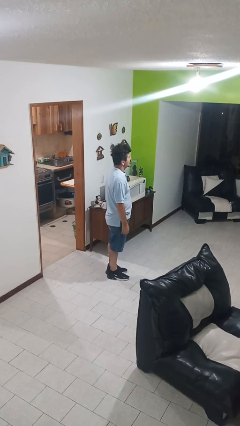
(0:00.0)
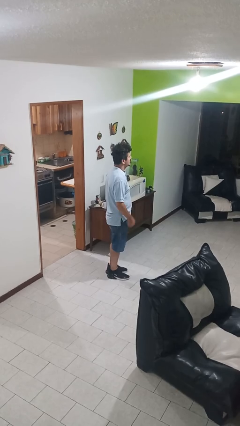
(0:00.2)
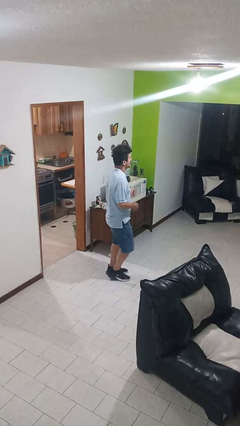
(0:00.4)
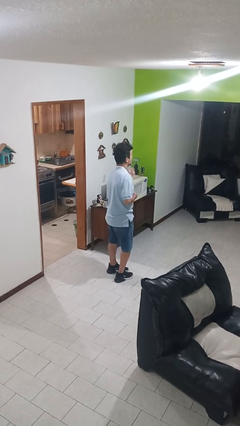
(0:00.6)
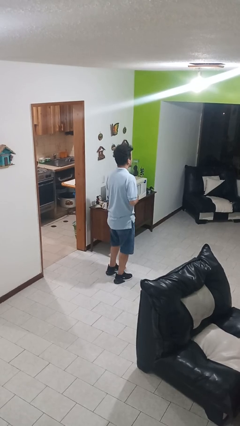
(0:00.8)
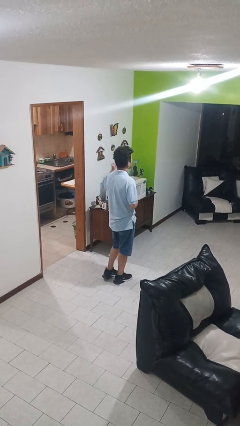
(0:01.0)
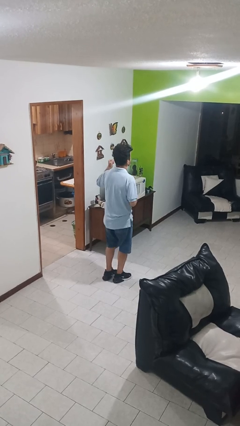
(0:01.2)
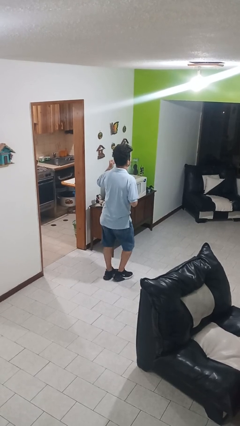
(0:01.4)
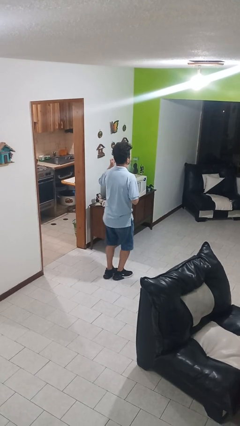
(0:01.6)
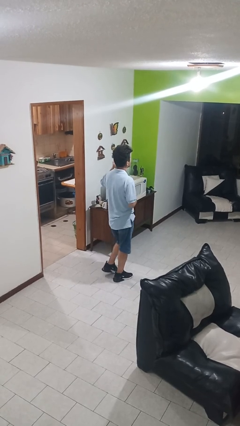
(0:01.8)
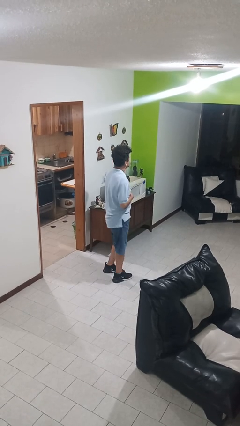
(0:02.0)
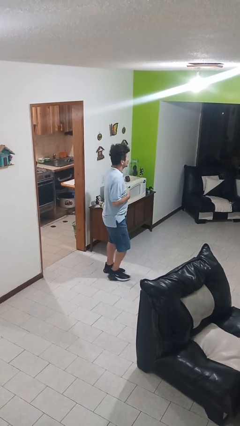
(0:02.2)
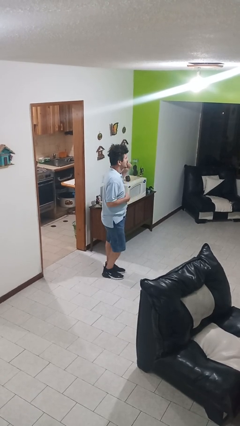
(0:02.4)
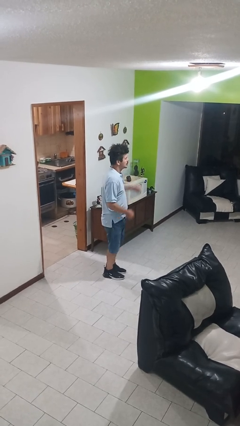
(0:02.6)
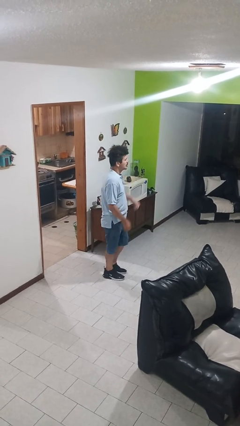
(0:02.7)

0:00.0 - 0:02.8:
person dances in place

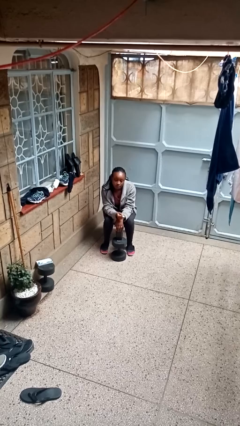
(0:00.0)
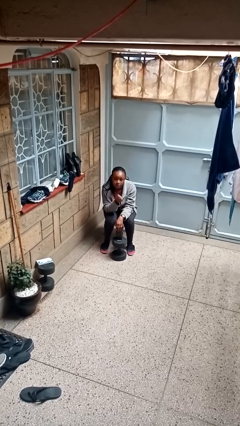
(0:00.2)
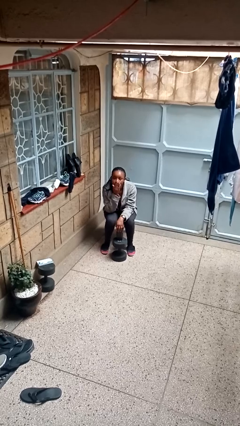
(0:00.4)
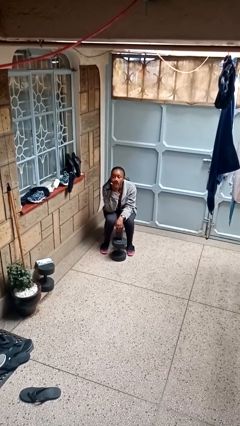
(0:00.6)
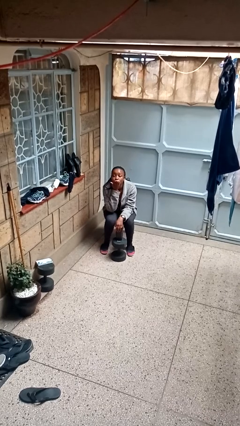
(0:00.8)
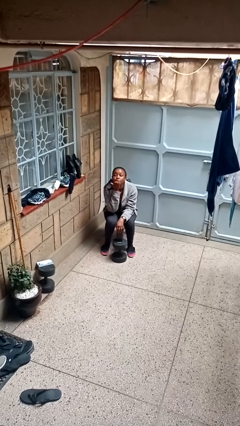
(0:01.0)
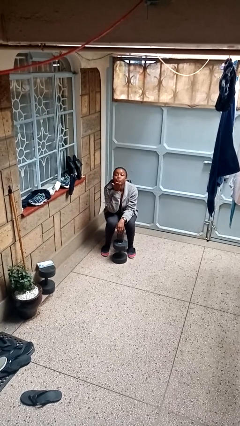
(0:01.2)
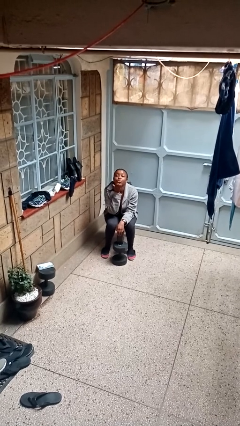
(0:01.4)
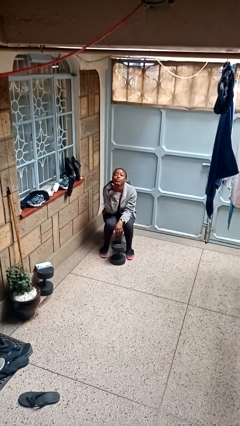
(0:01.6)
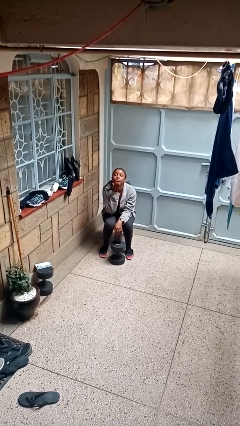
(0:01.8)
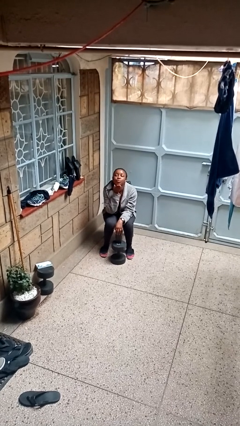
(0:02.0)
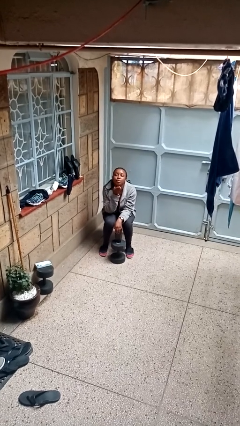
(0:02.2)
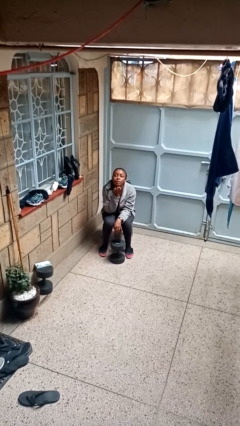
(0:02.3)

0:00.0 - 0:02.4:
person gestures blow kiss

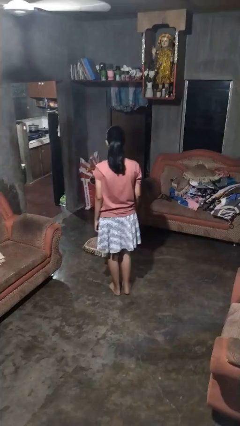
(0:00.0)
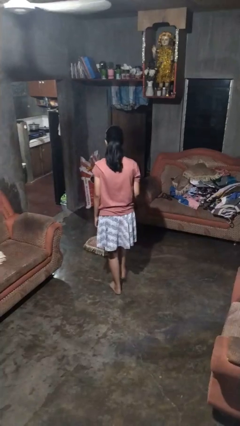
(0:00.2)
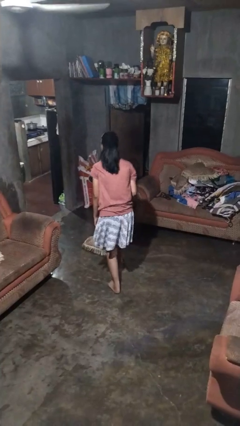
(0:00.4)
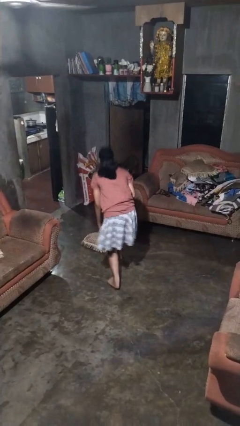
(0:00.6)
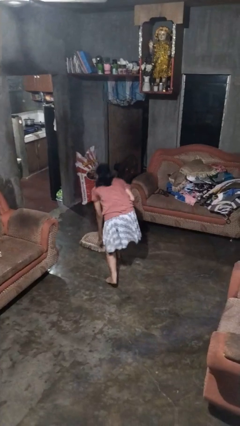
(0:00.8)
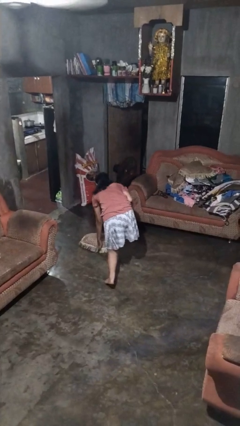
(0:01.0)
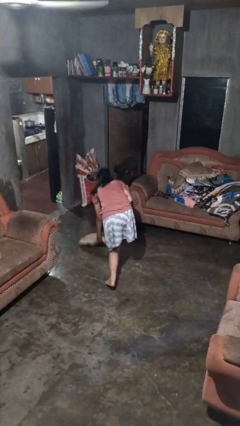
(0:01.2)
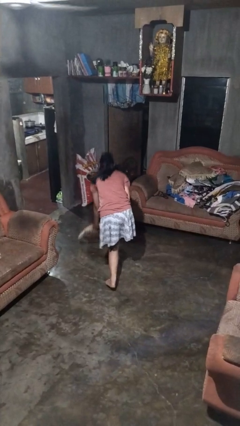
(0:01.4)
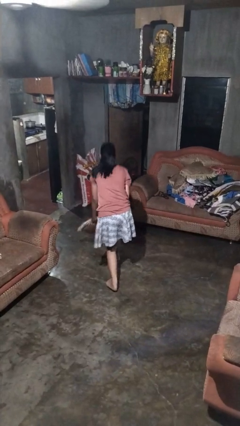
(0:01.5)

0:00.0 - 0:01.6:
person picks up object from floor

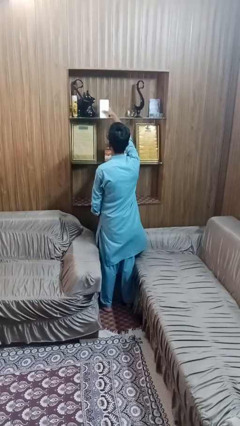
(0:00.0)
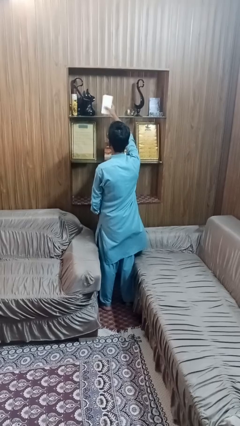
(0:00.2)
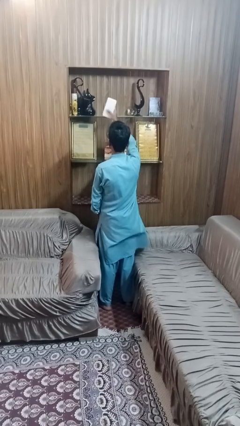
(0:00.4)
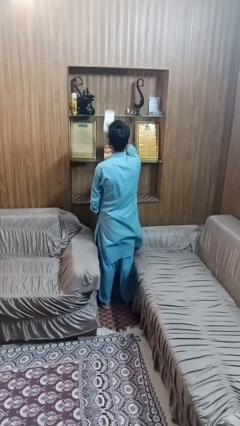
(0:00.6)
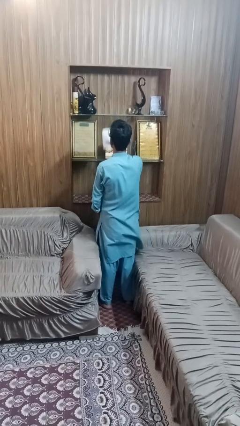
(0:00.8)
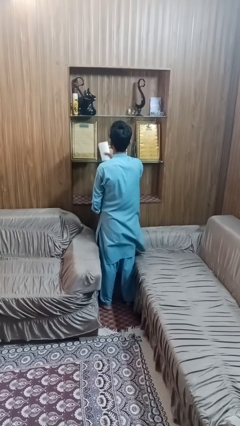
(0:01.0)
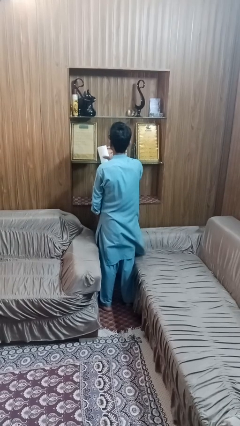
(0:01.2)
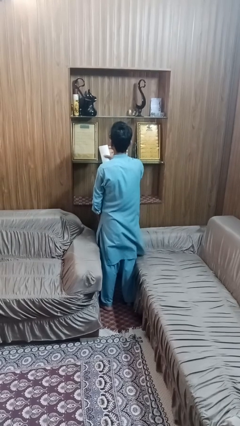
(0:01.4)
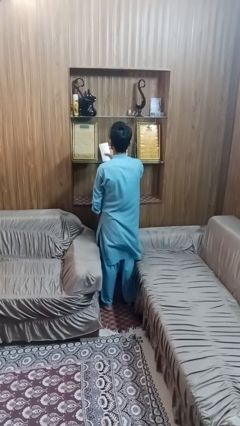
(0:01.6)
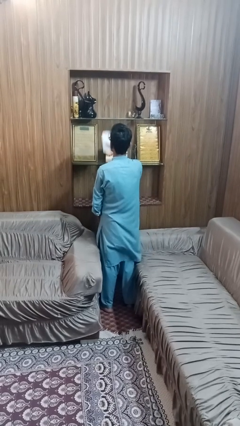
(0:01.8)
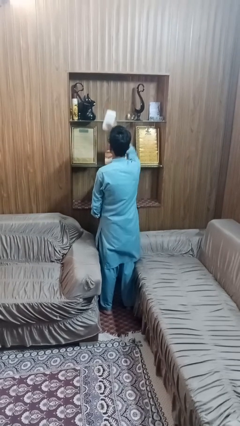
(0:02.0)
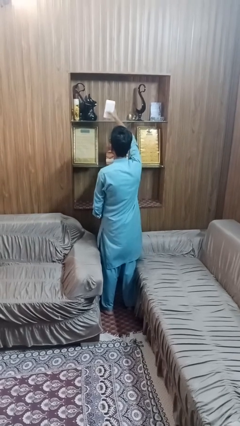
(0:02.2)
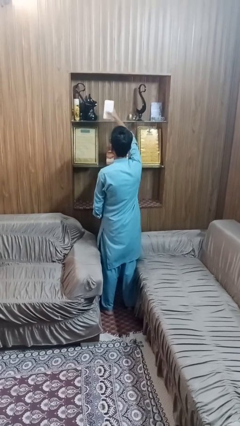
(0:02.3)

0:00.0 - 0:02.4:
person picks up object from shelf

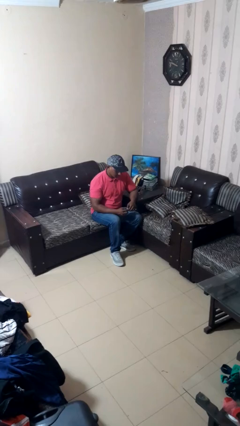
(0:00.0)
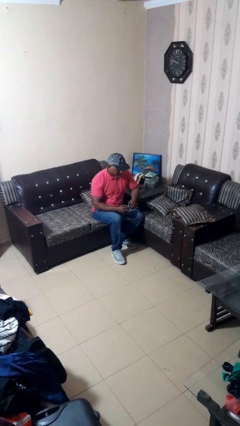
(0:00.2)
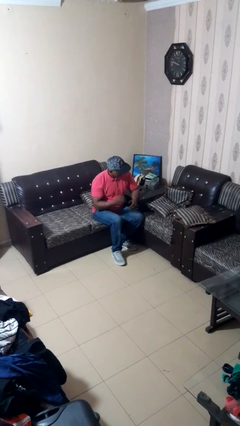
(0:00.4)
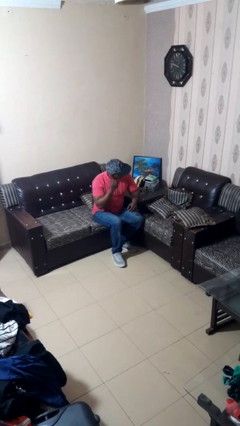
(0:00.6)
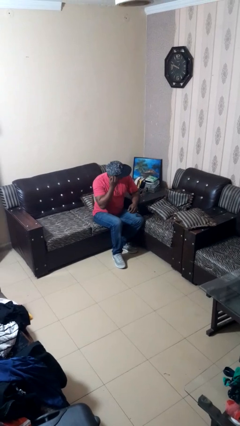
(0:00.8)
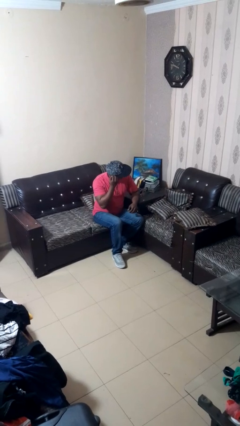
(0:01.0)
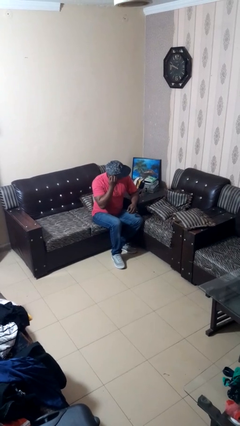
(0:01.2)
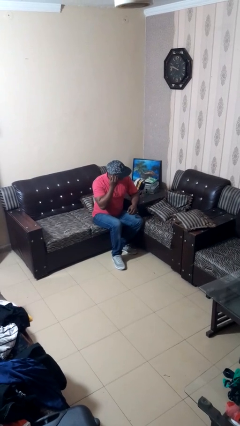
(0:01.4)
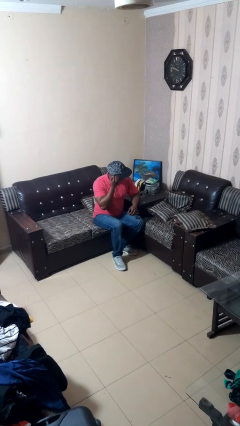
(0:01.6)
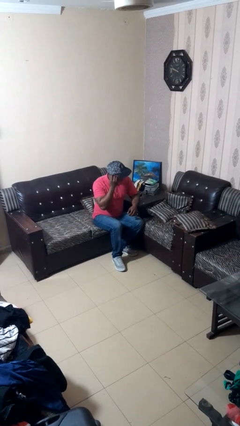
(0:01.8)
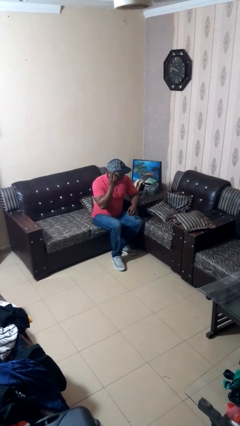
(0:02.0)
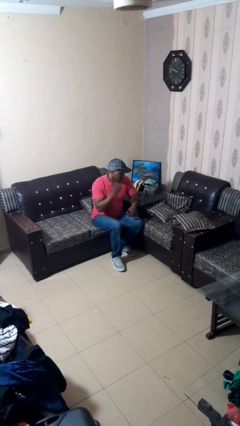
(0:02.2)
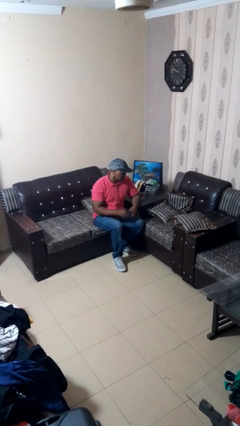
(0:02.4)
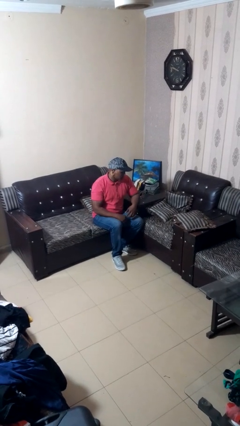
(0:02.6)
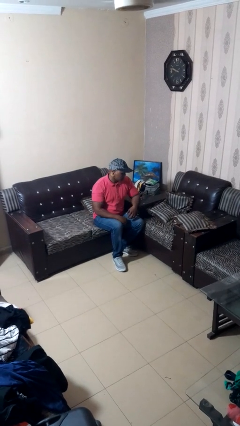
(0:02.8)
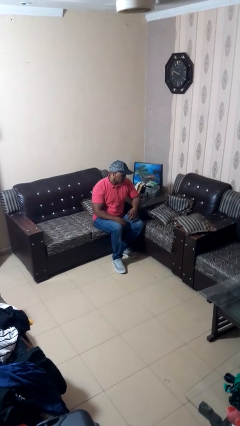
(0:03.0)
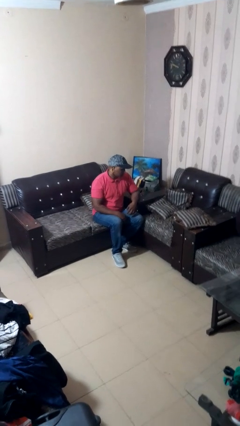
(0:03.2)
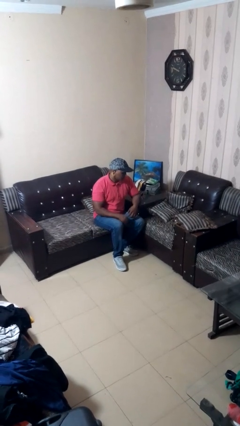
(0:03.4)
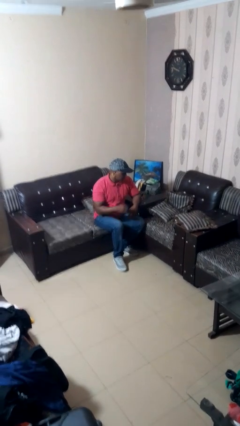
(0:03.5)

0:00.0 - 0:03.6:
person puts on earrings

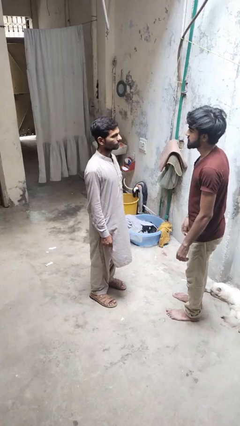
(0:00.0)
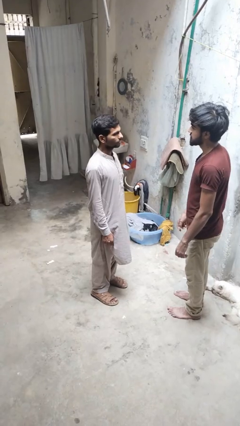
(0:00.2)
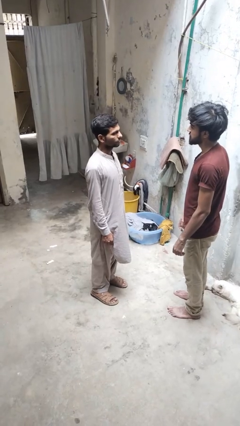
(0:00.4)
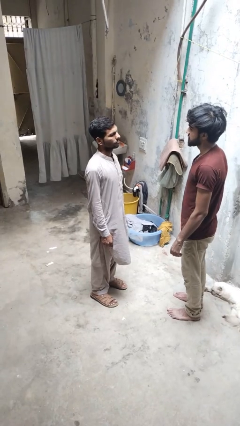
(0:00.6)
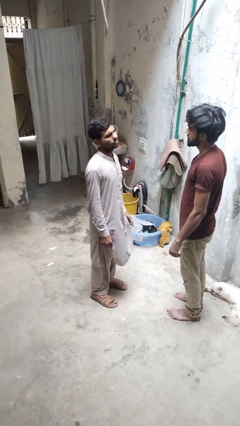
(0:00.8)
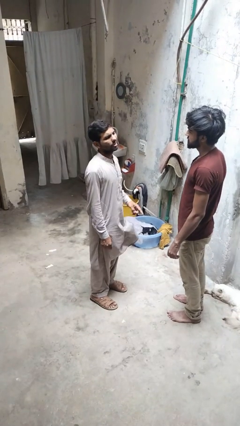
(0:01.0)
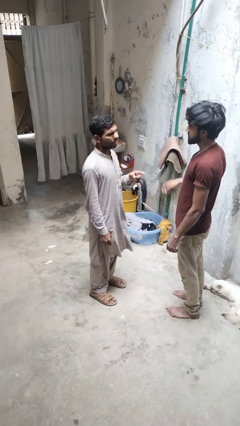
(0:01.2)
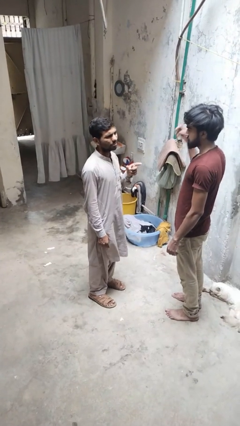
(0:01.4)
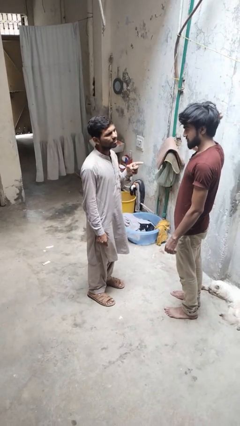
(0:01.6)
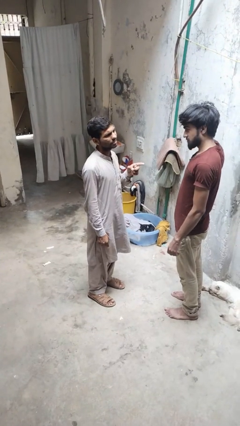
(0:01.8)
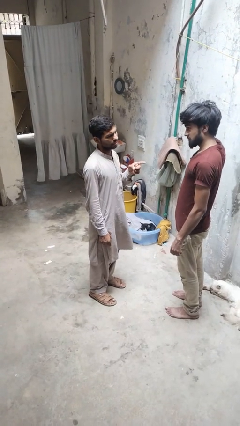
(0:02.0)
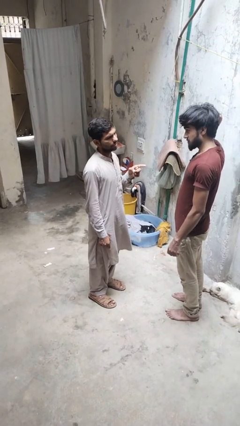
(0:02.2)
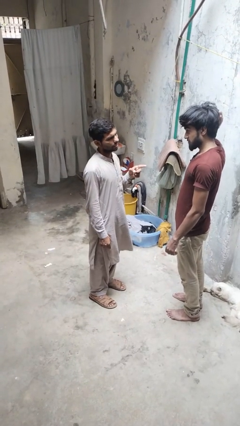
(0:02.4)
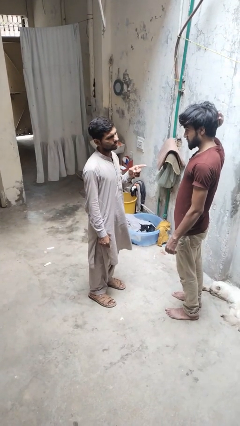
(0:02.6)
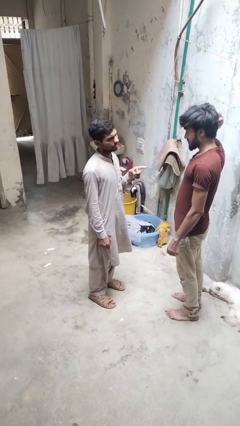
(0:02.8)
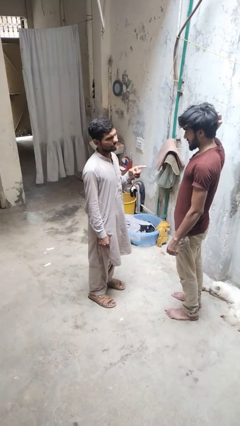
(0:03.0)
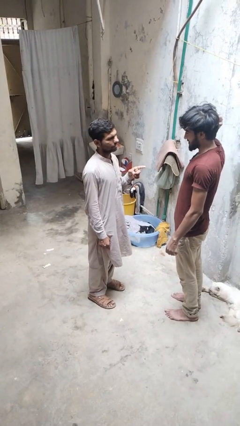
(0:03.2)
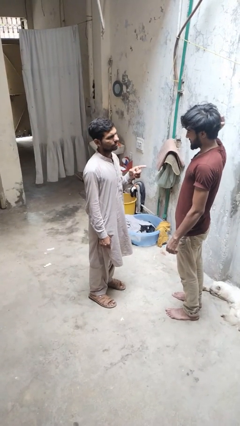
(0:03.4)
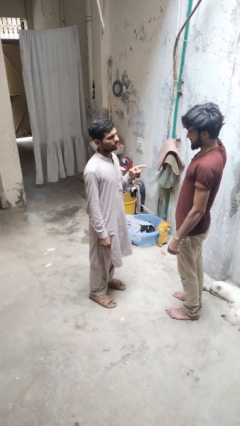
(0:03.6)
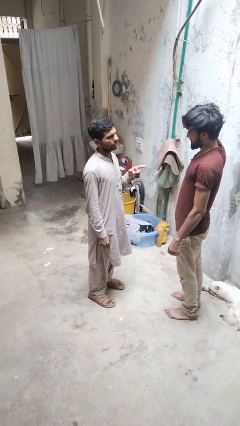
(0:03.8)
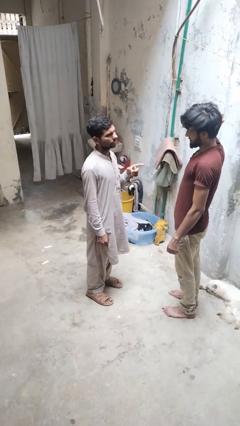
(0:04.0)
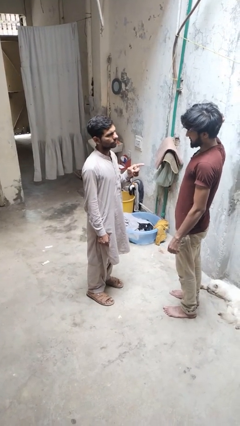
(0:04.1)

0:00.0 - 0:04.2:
person points at person

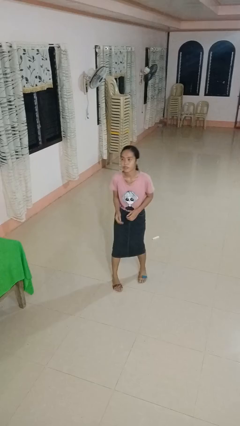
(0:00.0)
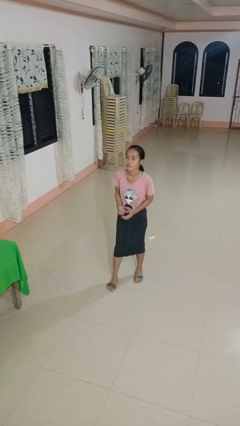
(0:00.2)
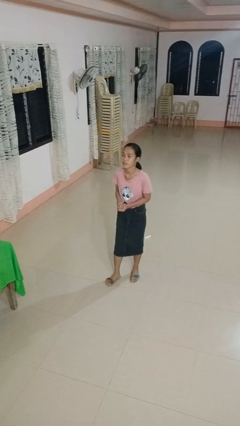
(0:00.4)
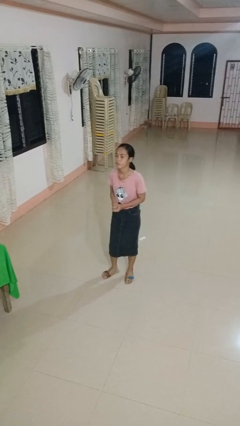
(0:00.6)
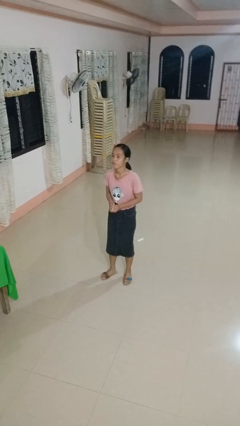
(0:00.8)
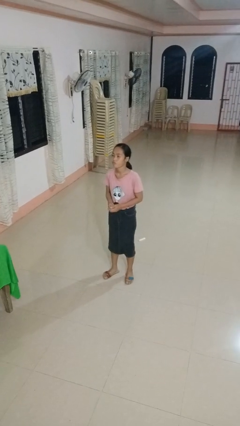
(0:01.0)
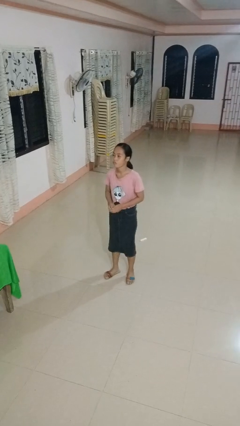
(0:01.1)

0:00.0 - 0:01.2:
person slaps hands on thighs
